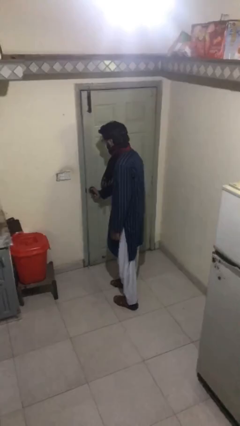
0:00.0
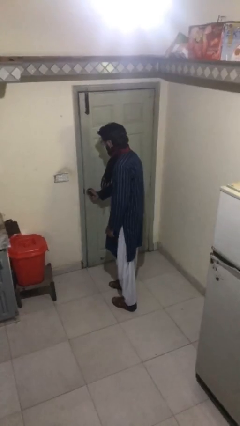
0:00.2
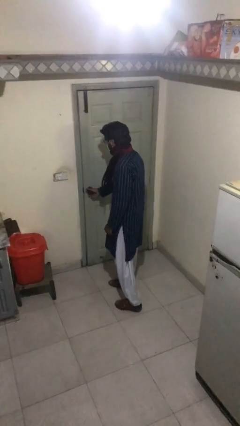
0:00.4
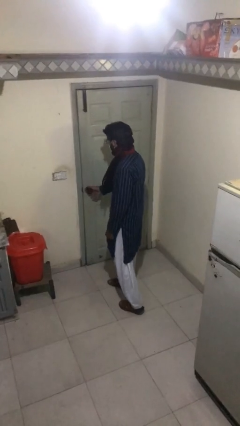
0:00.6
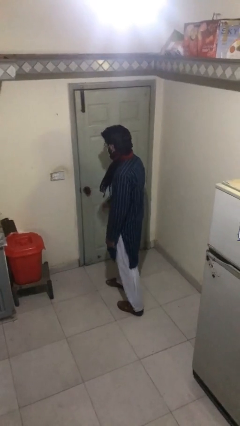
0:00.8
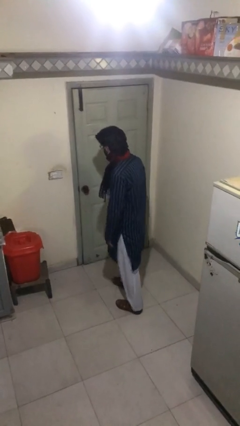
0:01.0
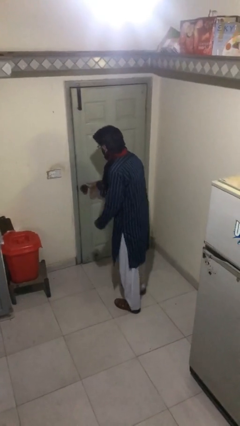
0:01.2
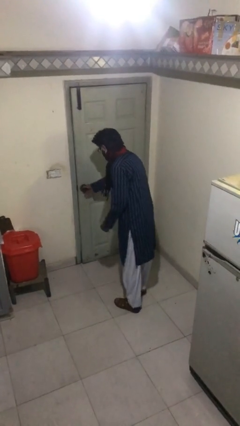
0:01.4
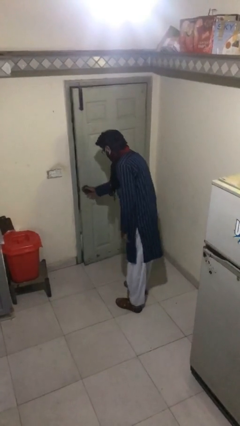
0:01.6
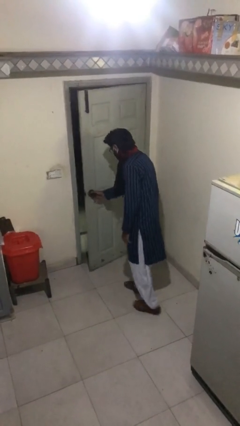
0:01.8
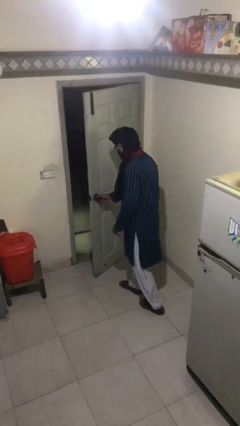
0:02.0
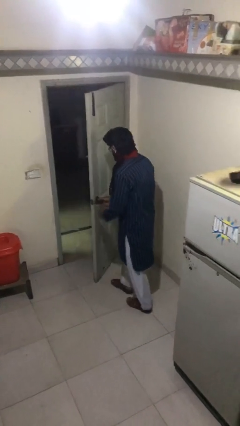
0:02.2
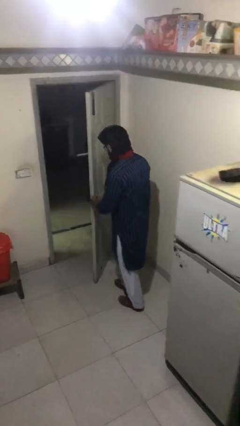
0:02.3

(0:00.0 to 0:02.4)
person opens facility door

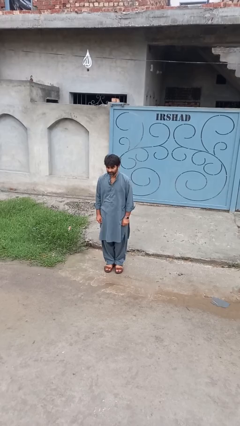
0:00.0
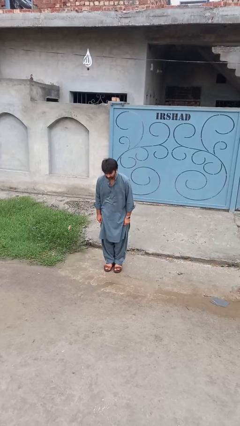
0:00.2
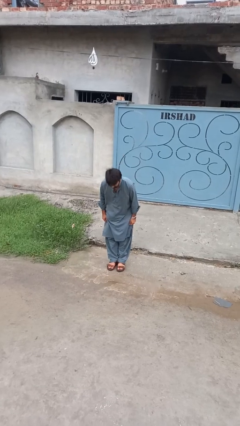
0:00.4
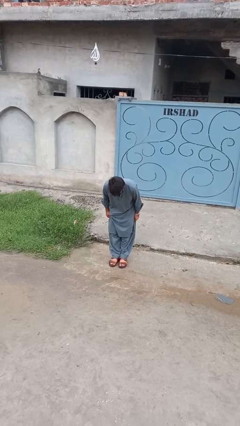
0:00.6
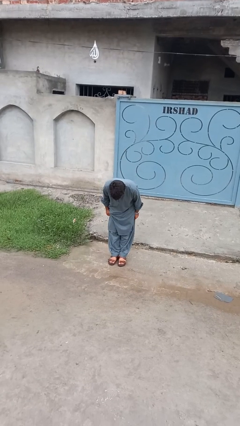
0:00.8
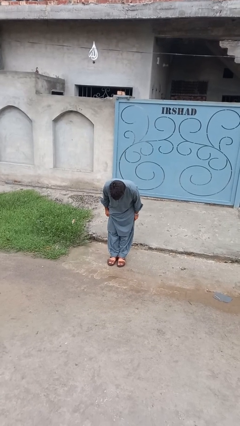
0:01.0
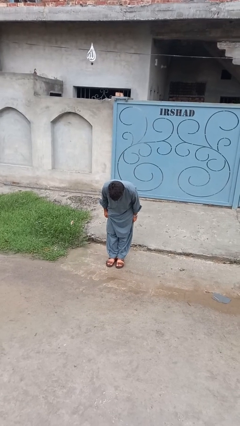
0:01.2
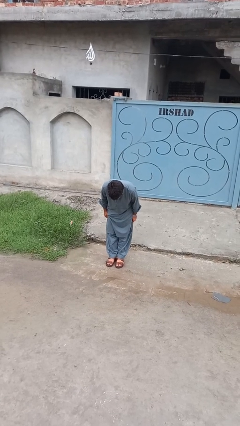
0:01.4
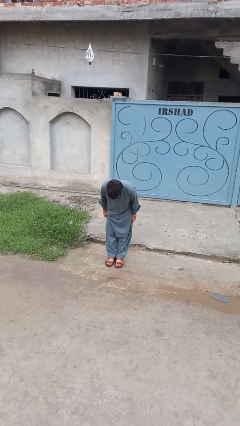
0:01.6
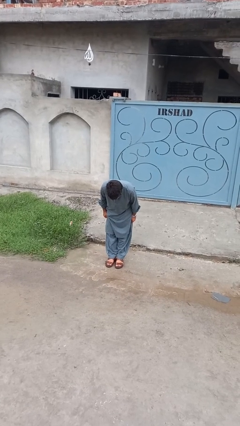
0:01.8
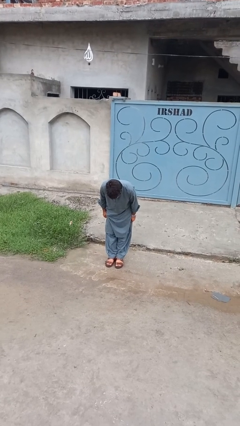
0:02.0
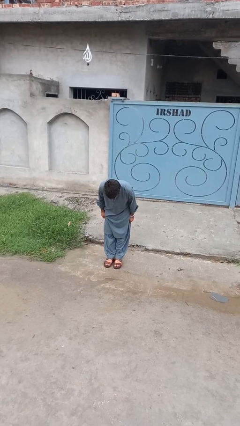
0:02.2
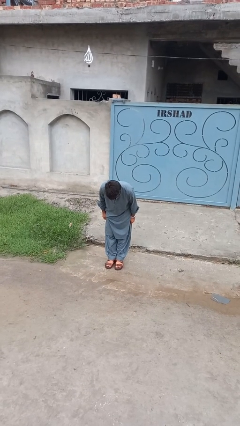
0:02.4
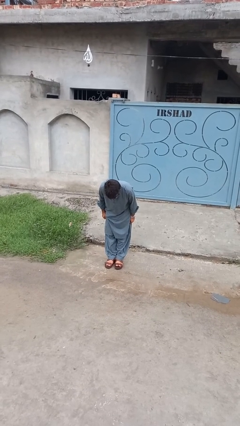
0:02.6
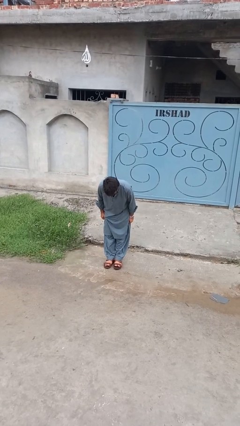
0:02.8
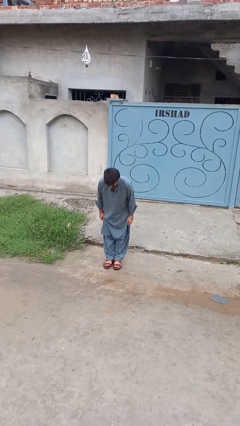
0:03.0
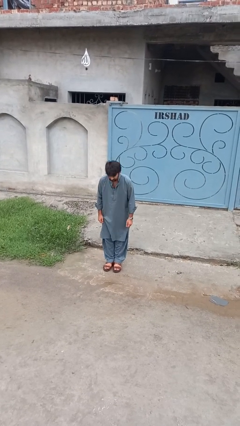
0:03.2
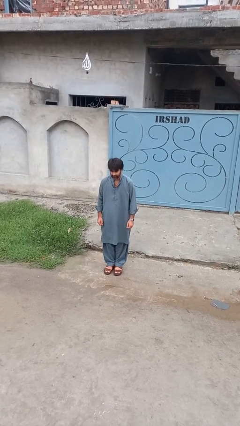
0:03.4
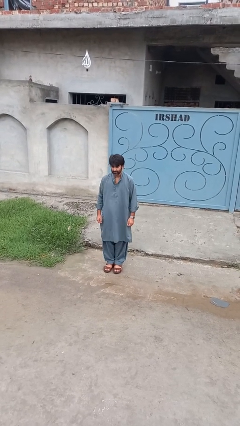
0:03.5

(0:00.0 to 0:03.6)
person bows

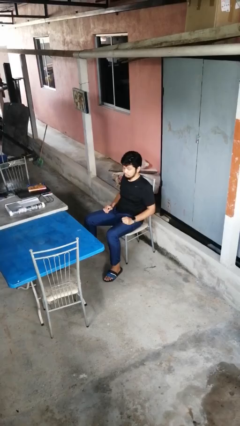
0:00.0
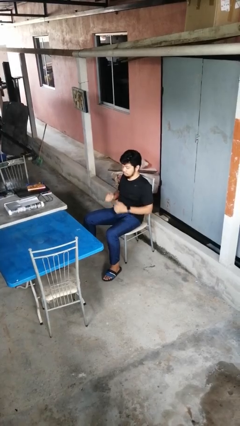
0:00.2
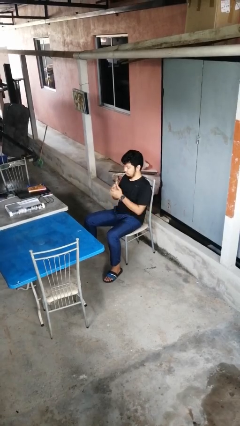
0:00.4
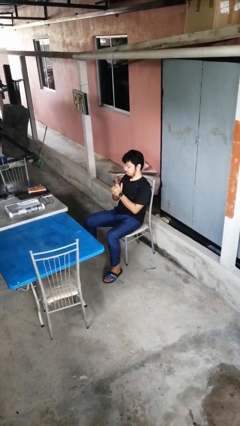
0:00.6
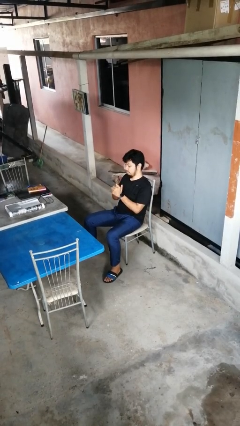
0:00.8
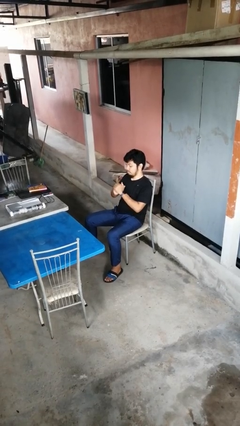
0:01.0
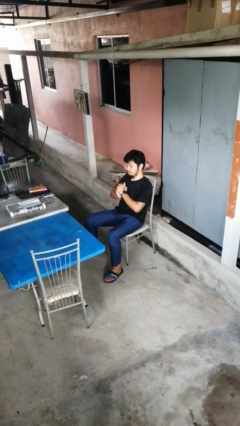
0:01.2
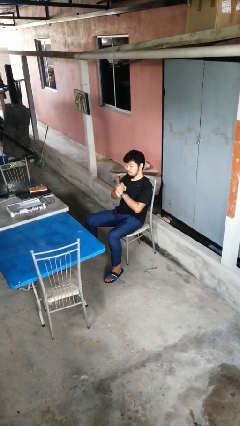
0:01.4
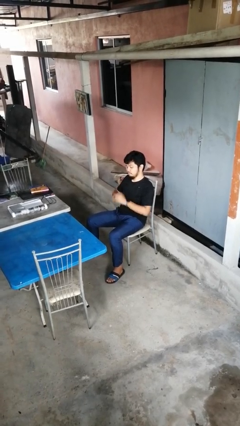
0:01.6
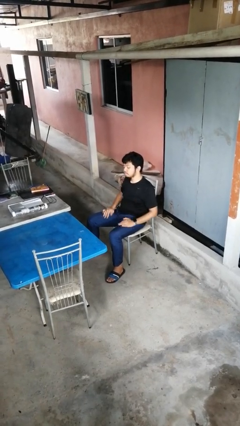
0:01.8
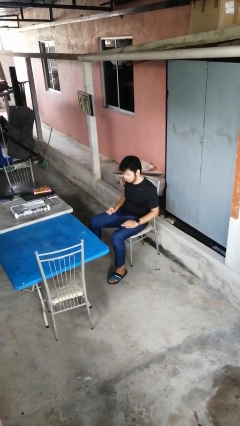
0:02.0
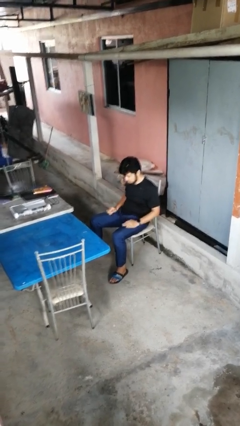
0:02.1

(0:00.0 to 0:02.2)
person cracks knuckles

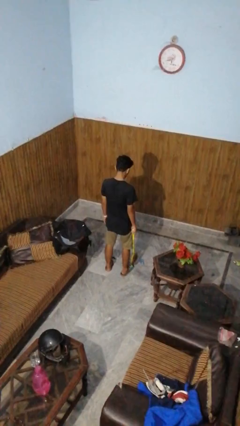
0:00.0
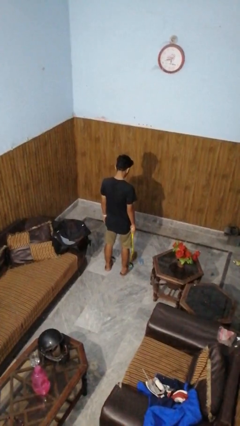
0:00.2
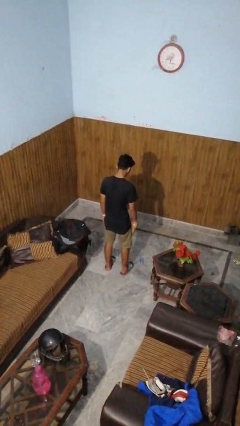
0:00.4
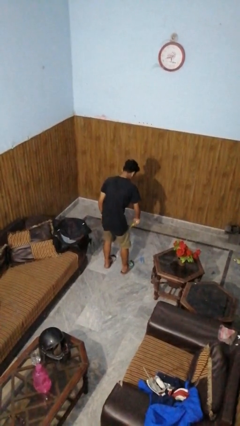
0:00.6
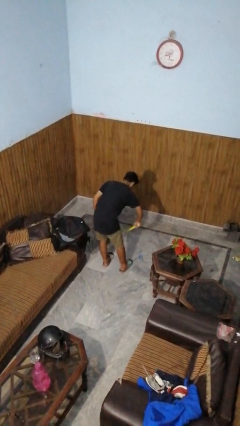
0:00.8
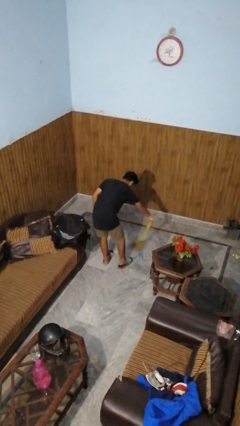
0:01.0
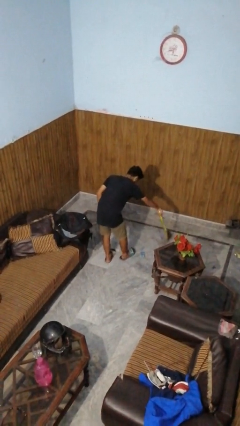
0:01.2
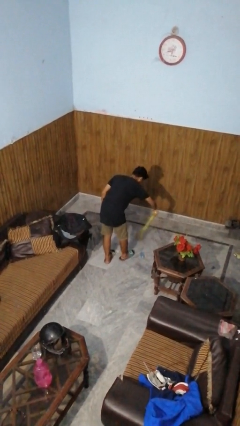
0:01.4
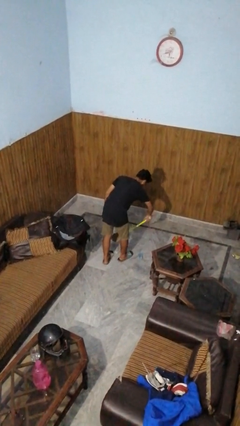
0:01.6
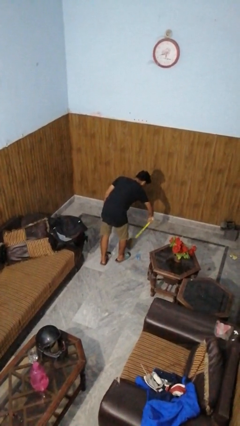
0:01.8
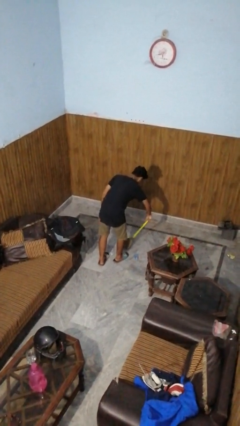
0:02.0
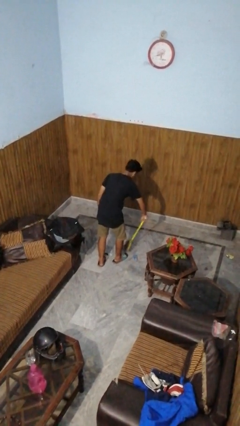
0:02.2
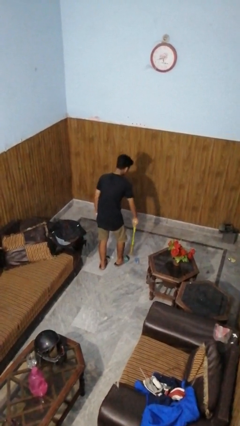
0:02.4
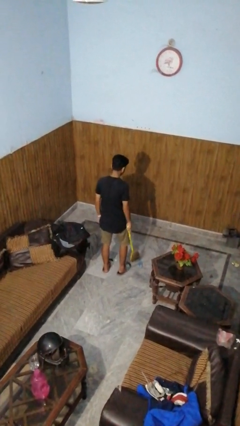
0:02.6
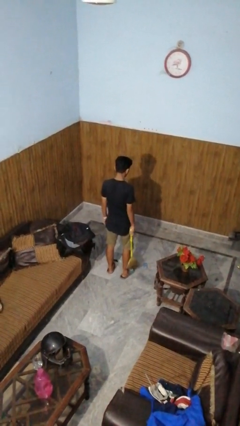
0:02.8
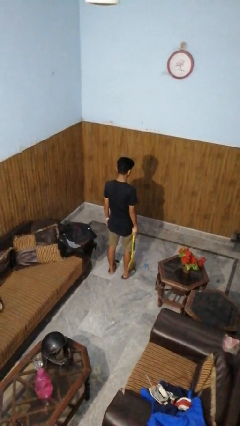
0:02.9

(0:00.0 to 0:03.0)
person sweeps floor

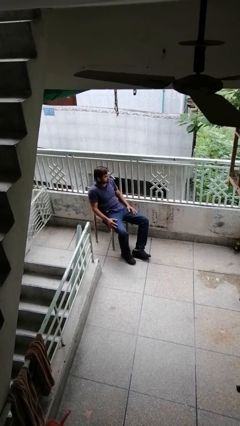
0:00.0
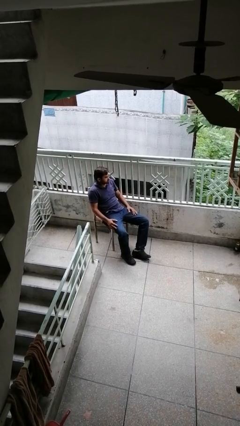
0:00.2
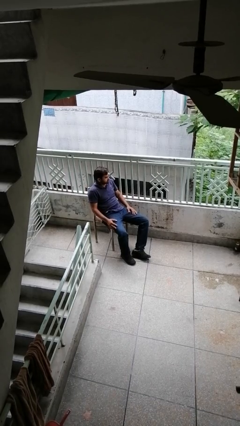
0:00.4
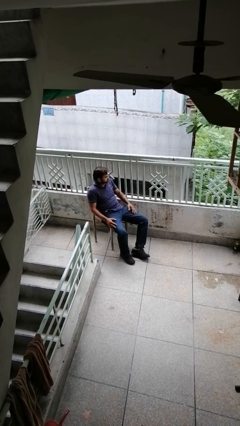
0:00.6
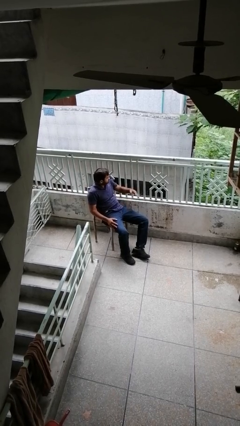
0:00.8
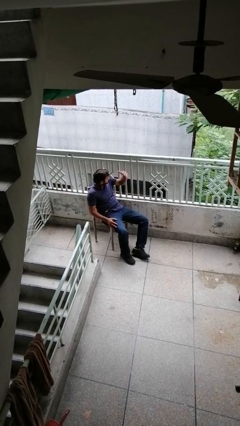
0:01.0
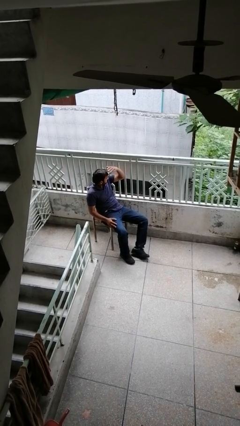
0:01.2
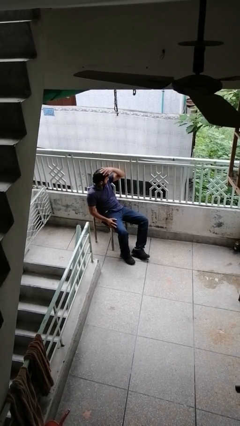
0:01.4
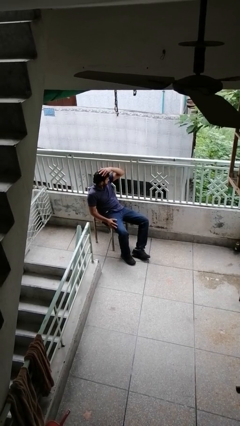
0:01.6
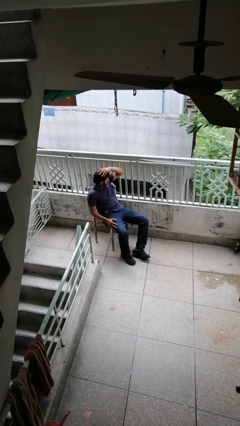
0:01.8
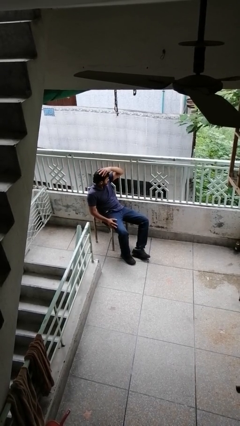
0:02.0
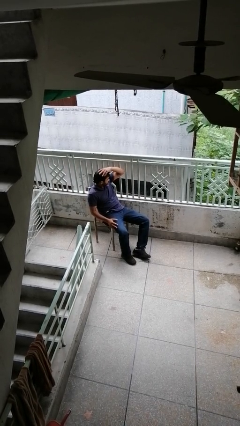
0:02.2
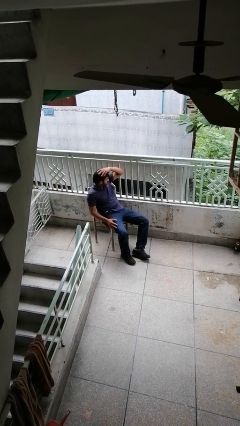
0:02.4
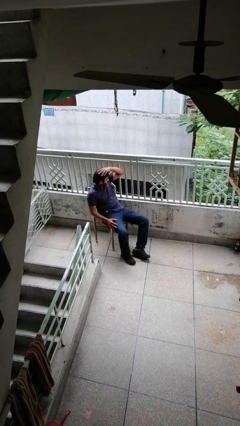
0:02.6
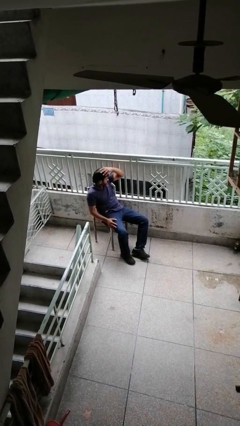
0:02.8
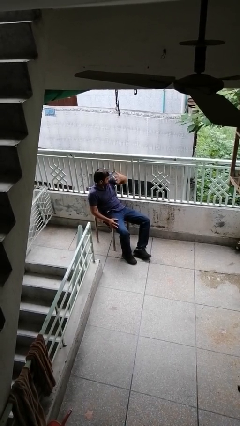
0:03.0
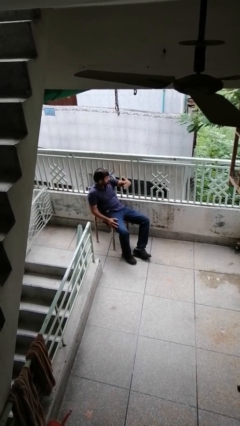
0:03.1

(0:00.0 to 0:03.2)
person pats head

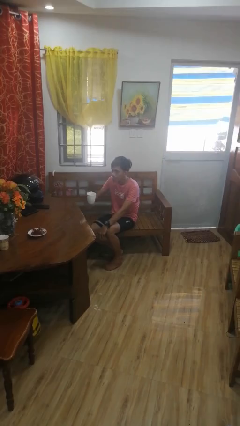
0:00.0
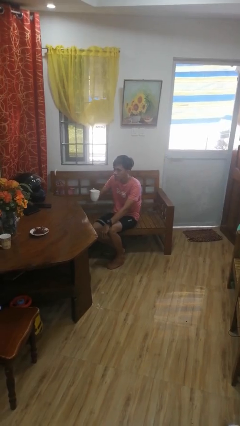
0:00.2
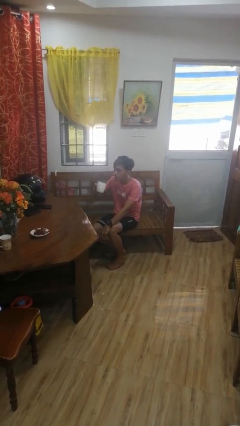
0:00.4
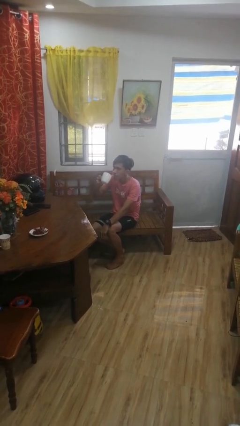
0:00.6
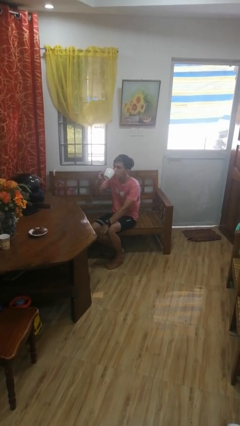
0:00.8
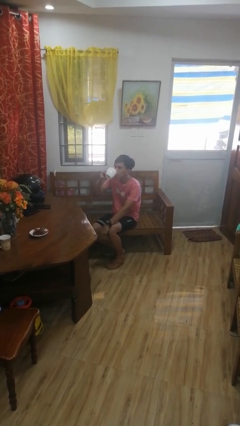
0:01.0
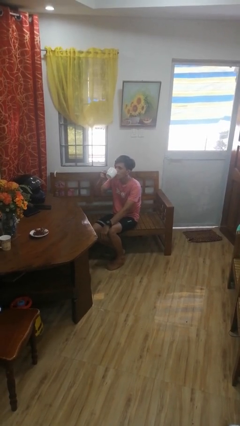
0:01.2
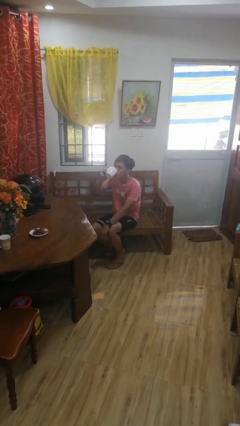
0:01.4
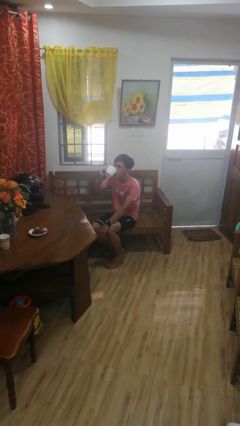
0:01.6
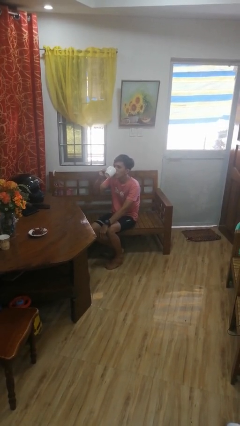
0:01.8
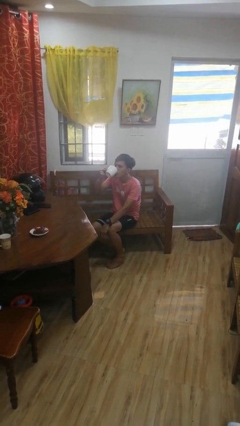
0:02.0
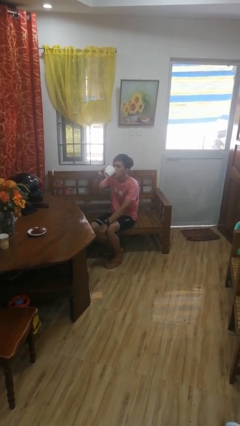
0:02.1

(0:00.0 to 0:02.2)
person drinks from mug

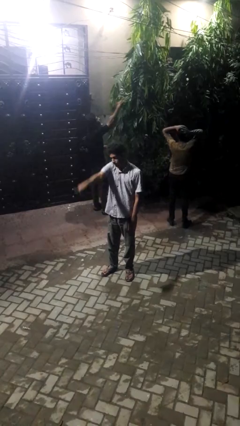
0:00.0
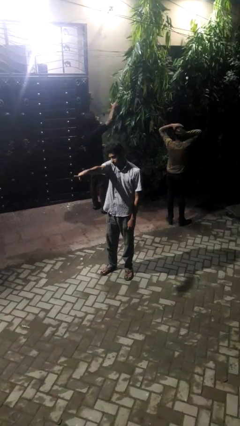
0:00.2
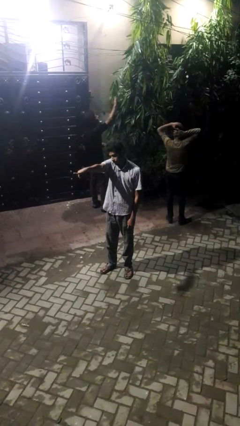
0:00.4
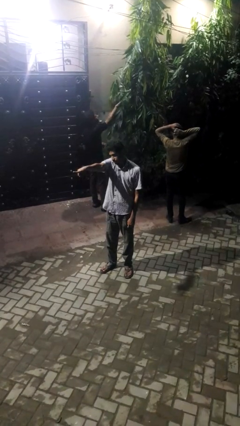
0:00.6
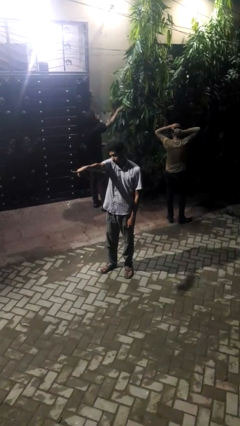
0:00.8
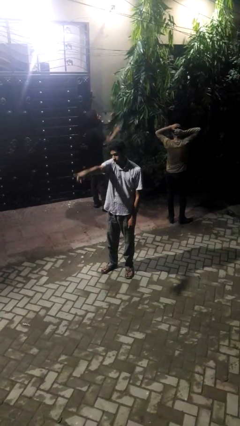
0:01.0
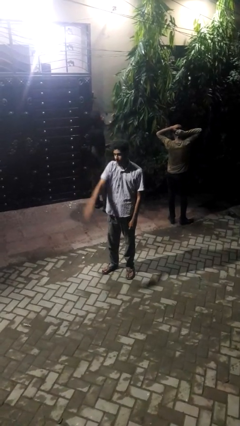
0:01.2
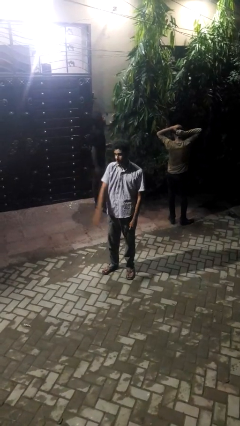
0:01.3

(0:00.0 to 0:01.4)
person points at person
